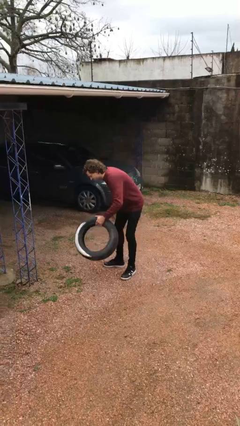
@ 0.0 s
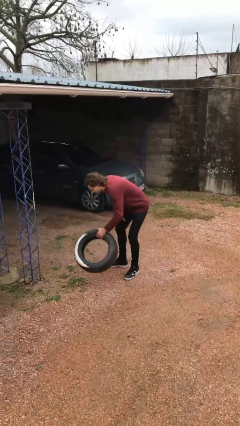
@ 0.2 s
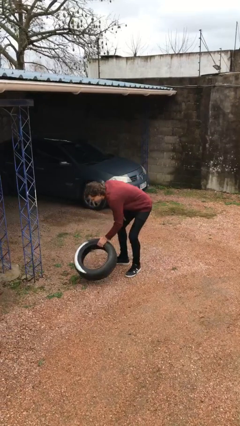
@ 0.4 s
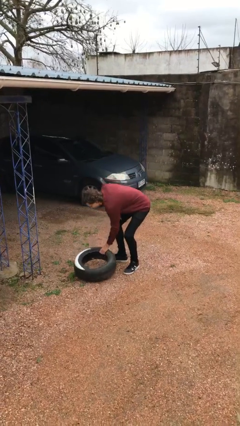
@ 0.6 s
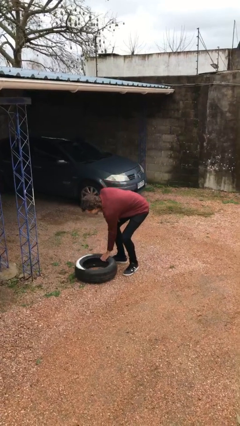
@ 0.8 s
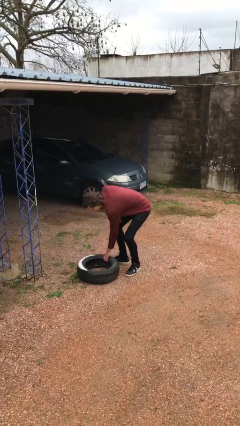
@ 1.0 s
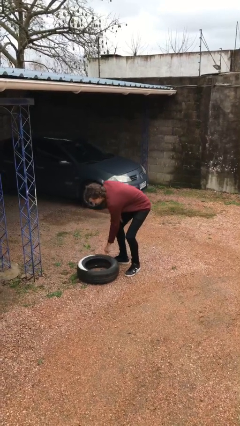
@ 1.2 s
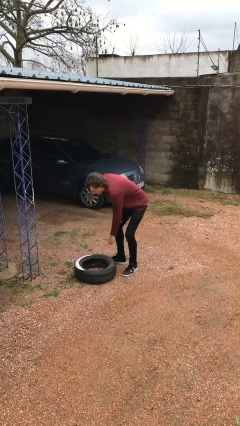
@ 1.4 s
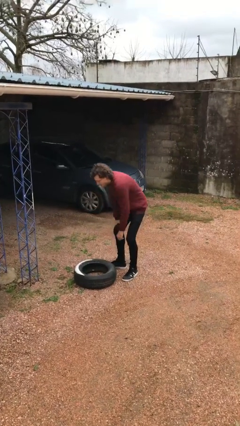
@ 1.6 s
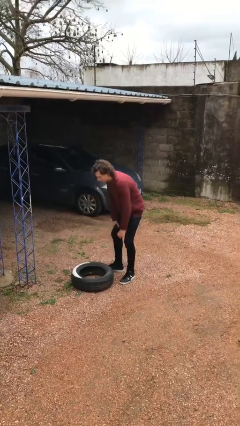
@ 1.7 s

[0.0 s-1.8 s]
person puts down object on floor

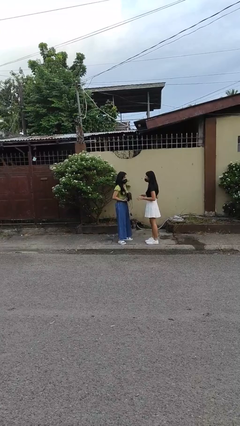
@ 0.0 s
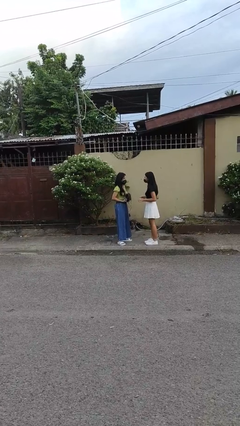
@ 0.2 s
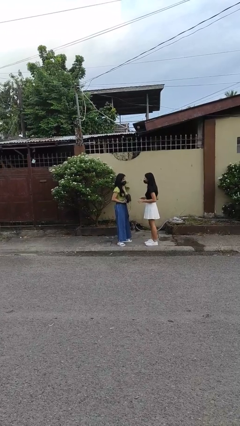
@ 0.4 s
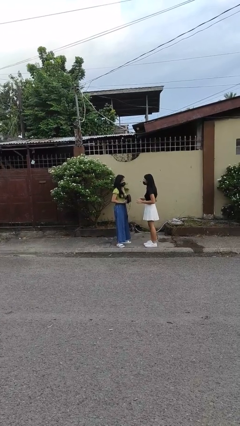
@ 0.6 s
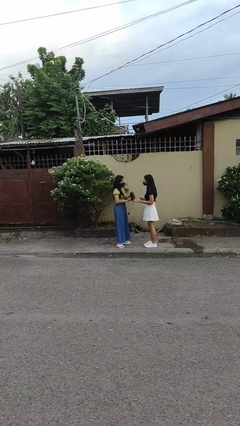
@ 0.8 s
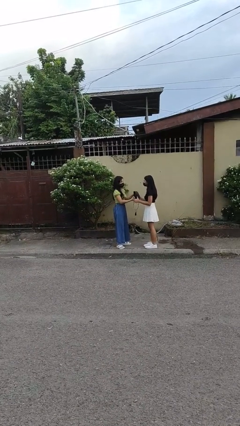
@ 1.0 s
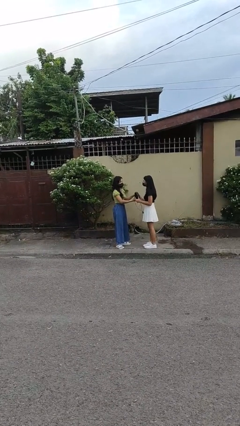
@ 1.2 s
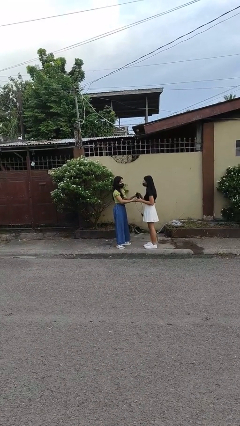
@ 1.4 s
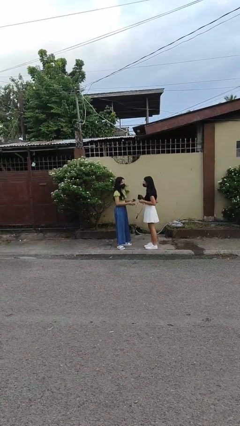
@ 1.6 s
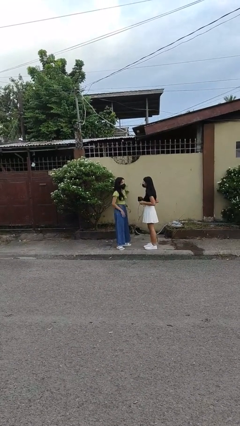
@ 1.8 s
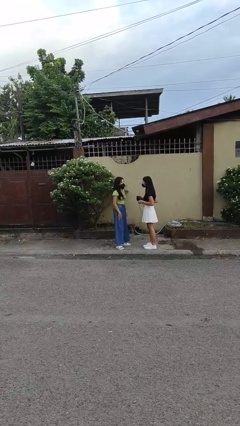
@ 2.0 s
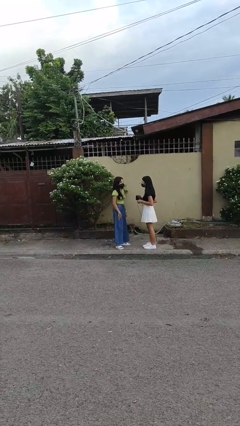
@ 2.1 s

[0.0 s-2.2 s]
person transfers object to person

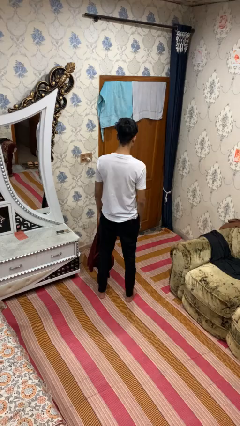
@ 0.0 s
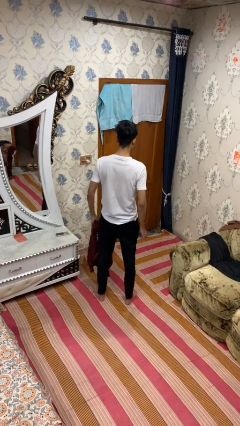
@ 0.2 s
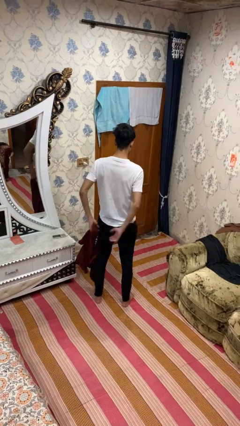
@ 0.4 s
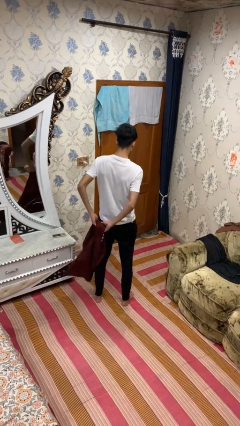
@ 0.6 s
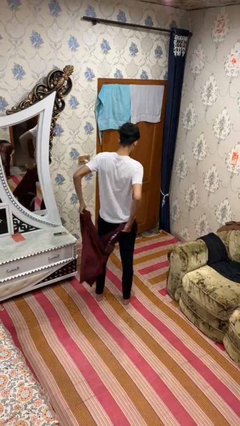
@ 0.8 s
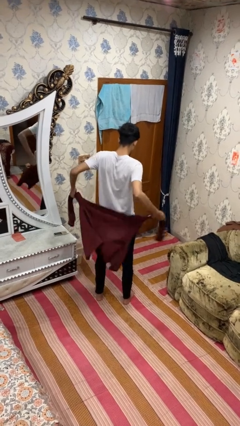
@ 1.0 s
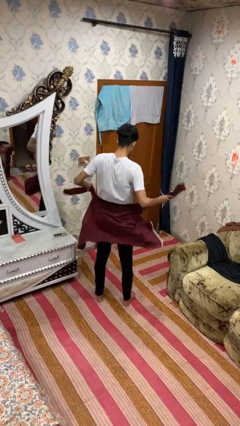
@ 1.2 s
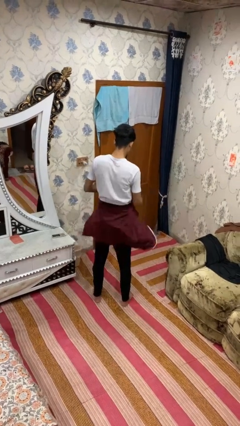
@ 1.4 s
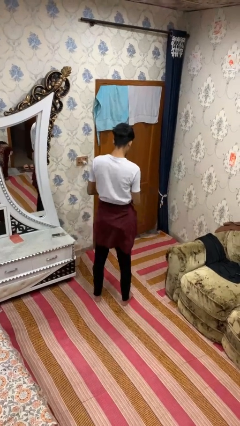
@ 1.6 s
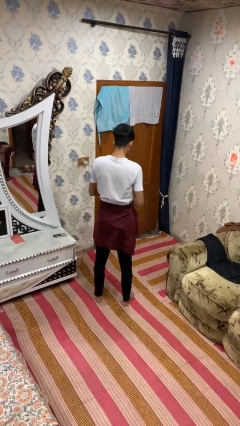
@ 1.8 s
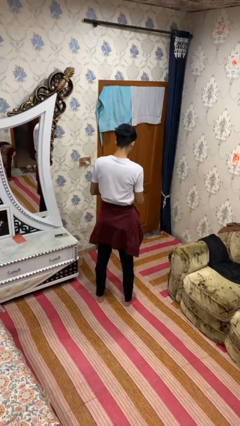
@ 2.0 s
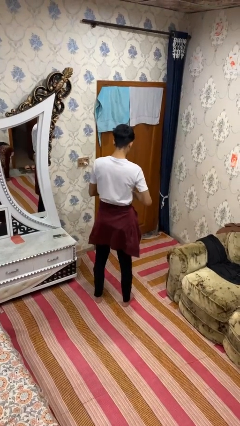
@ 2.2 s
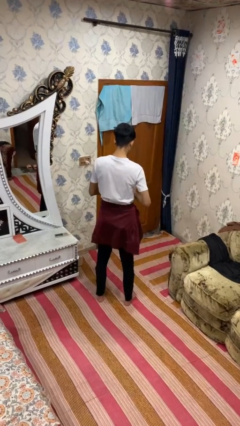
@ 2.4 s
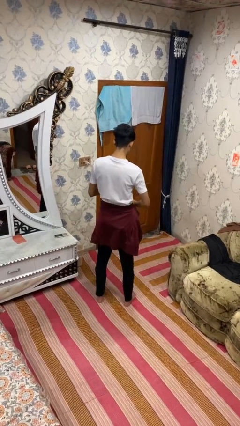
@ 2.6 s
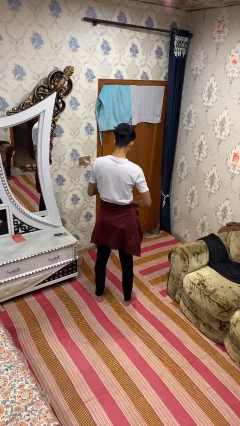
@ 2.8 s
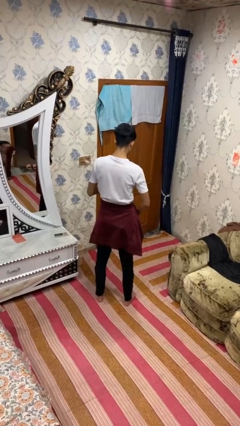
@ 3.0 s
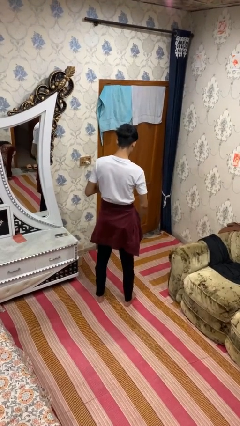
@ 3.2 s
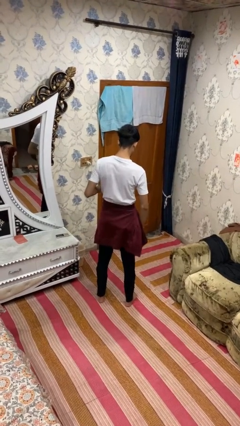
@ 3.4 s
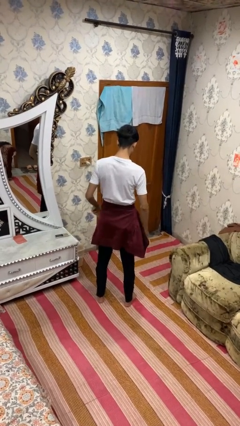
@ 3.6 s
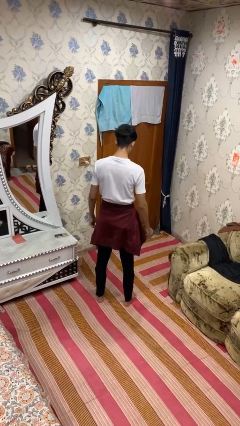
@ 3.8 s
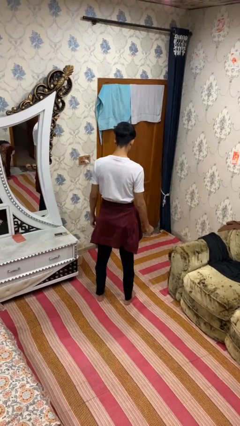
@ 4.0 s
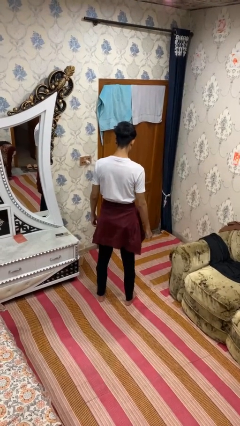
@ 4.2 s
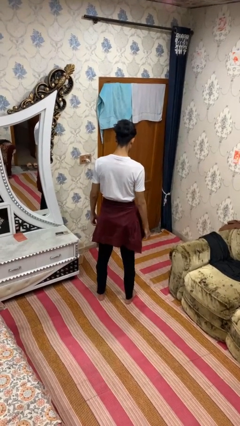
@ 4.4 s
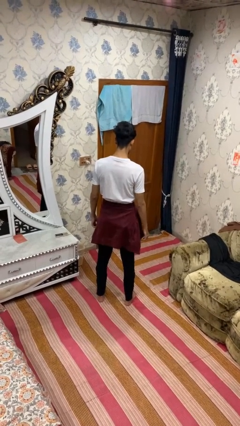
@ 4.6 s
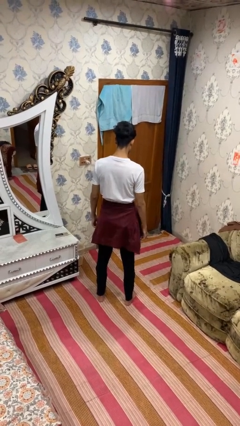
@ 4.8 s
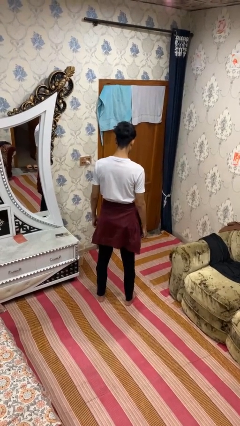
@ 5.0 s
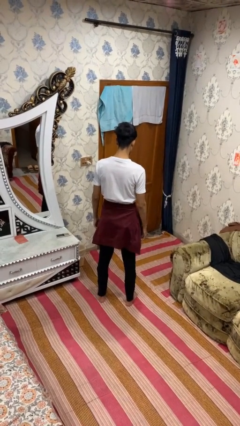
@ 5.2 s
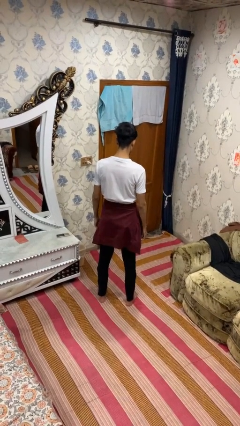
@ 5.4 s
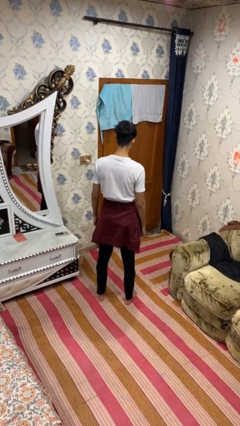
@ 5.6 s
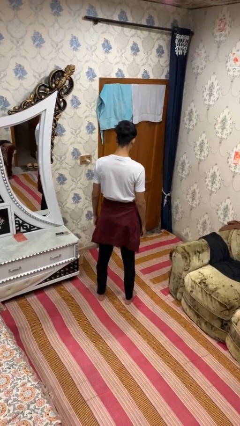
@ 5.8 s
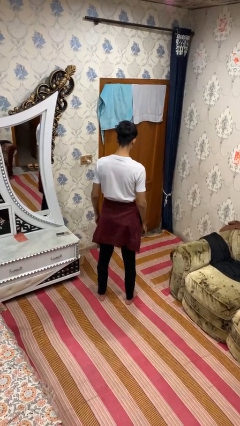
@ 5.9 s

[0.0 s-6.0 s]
person ties jacket around waist

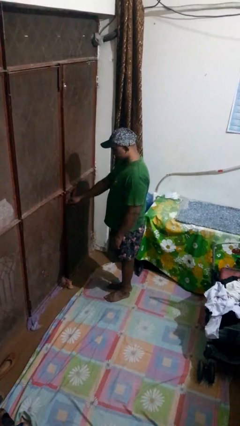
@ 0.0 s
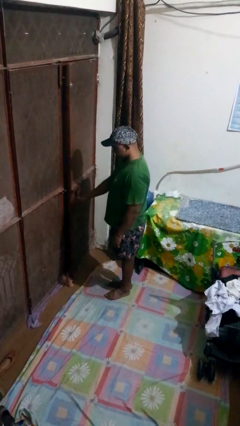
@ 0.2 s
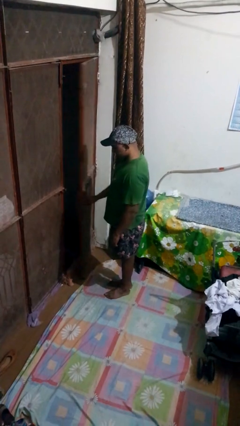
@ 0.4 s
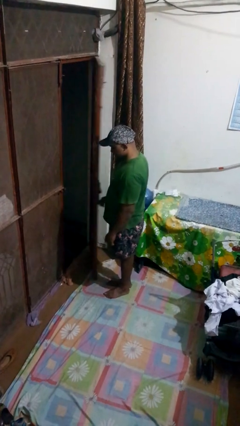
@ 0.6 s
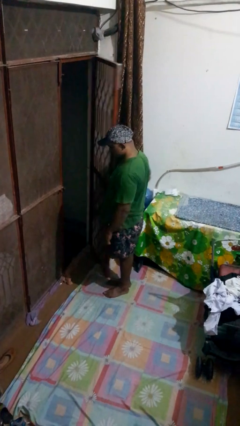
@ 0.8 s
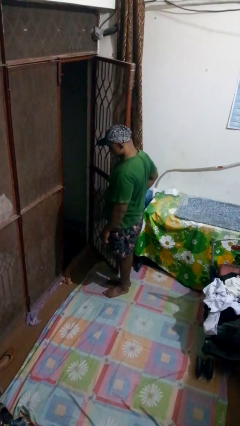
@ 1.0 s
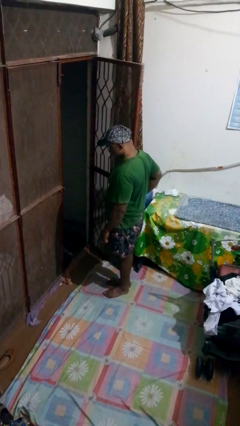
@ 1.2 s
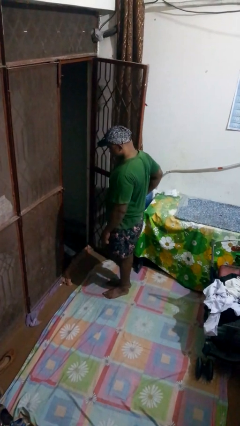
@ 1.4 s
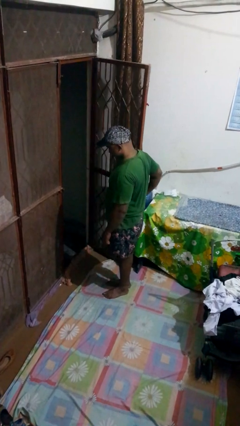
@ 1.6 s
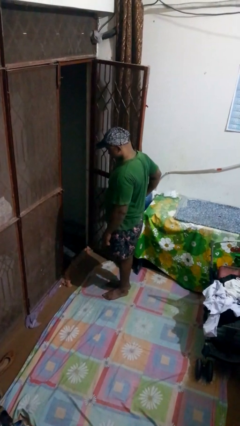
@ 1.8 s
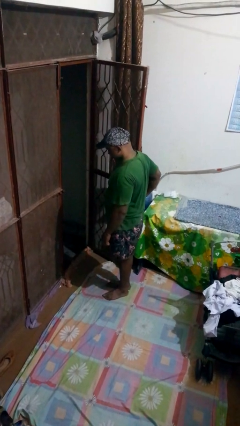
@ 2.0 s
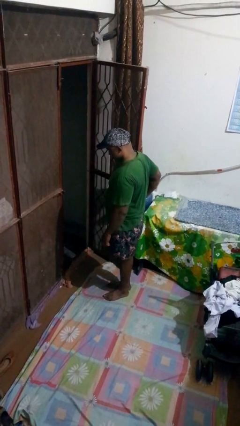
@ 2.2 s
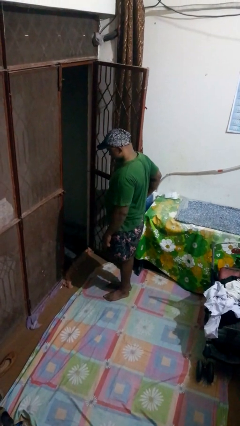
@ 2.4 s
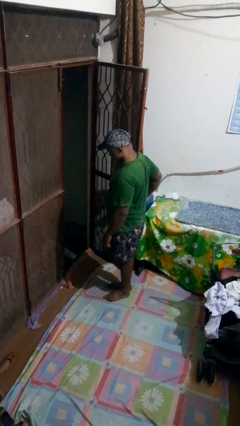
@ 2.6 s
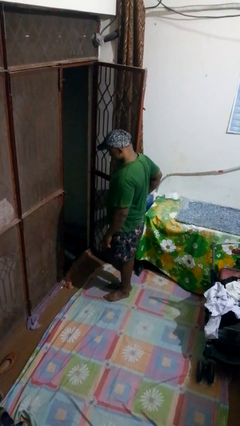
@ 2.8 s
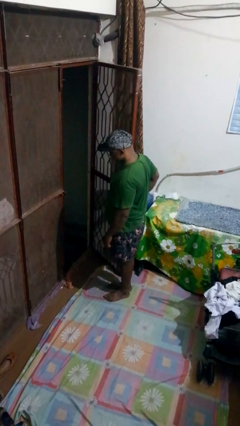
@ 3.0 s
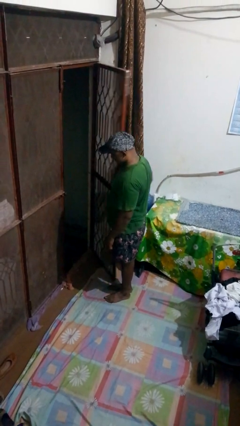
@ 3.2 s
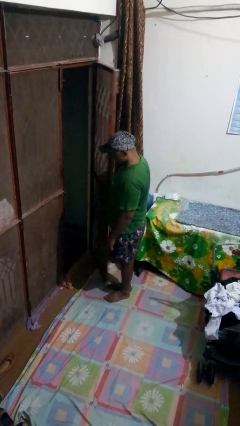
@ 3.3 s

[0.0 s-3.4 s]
person opens gate

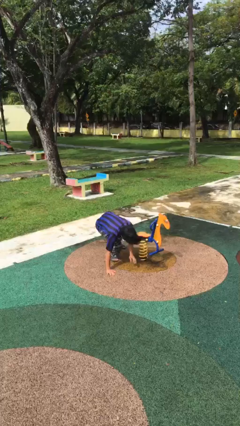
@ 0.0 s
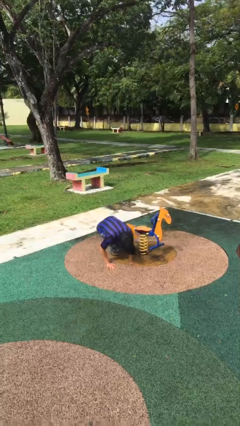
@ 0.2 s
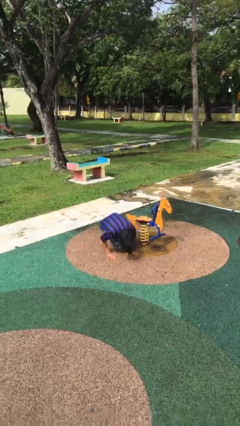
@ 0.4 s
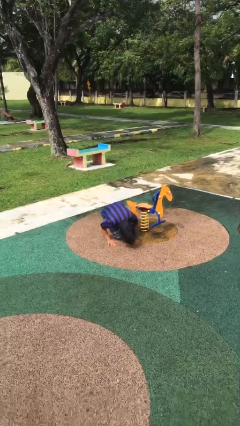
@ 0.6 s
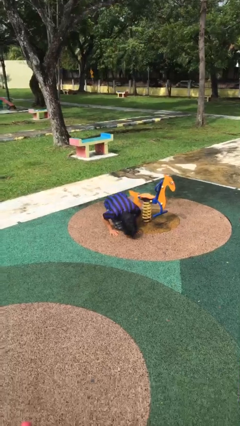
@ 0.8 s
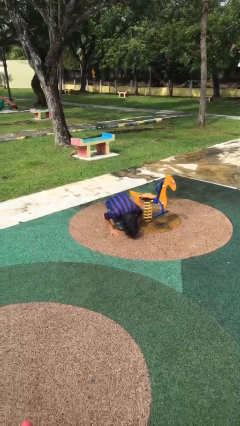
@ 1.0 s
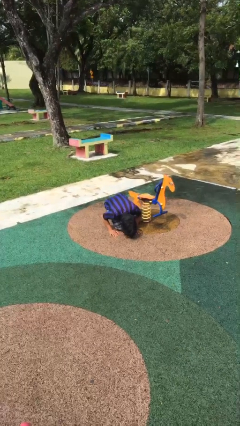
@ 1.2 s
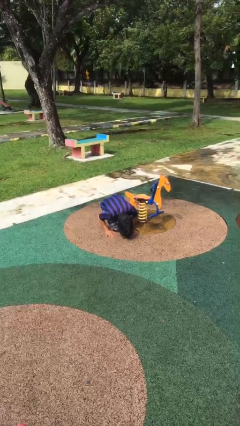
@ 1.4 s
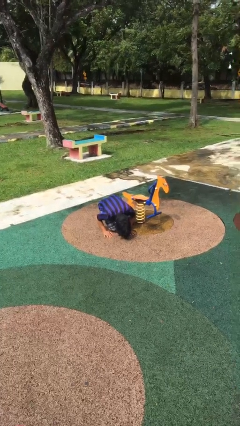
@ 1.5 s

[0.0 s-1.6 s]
person lies down on floor

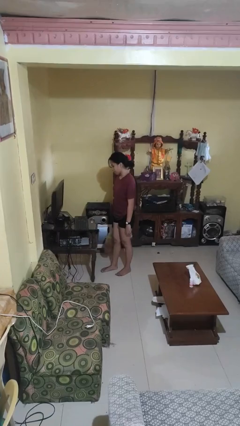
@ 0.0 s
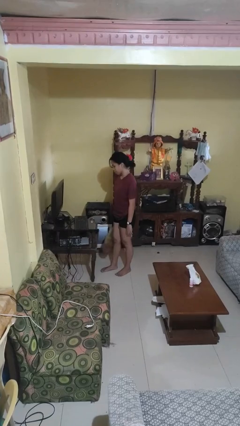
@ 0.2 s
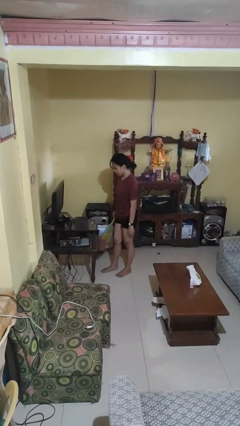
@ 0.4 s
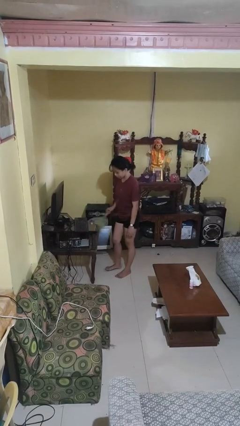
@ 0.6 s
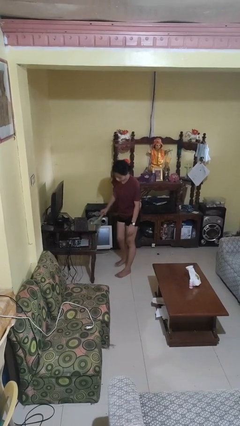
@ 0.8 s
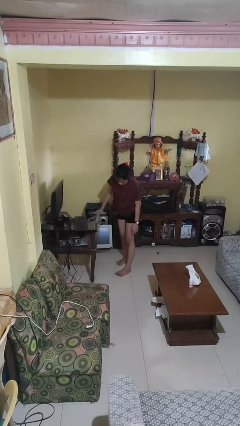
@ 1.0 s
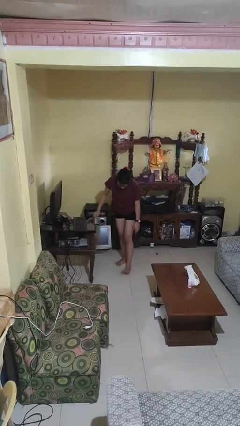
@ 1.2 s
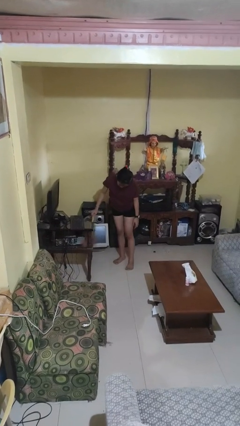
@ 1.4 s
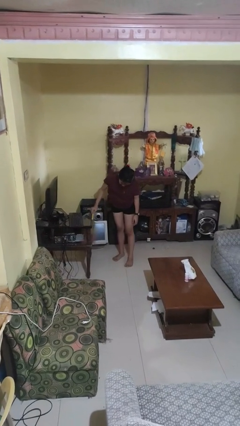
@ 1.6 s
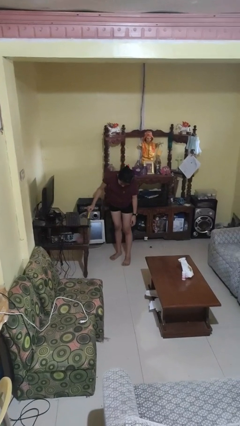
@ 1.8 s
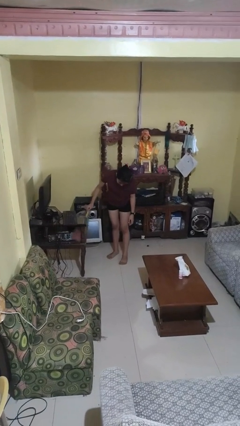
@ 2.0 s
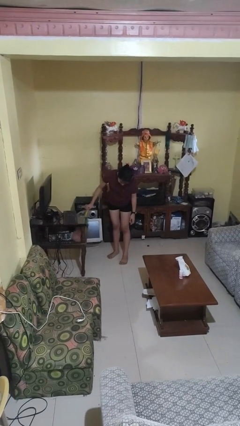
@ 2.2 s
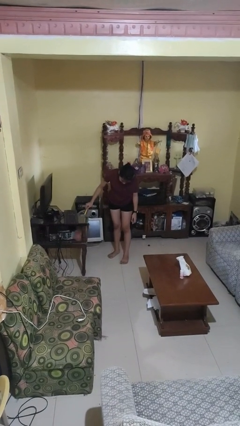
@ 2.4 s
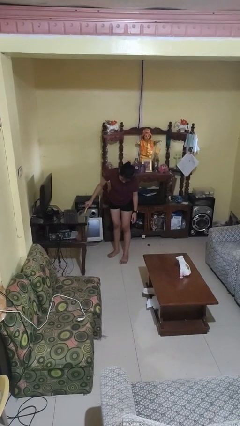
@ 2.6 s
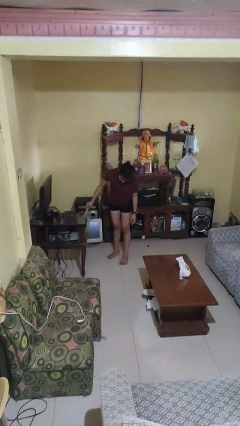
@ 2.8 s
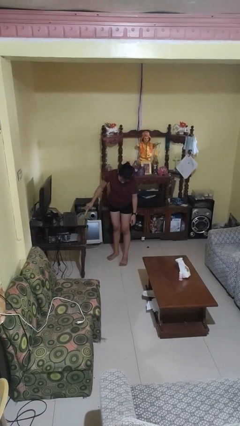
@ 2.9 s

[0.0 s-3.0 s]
person dusts furniture
